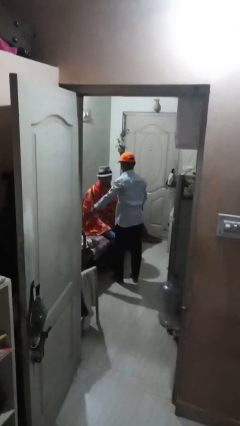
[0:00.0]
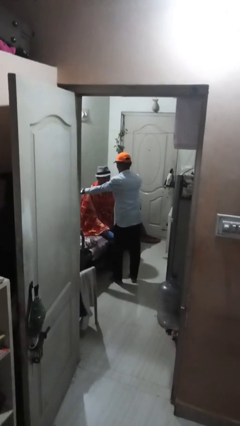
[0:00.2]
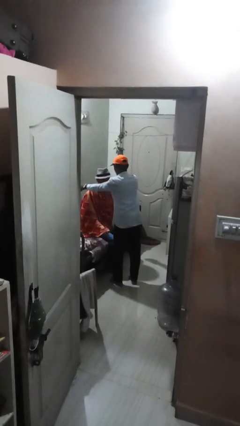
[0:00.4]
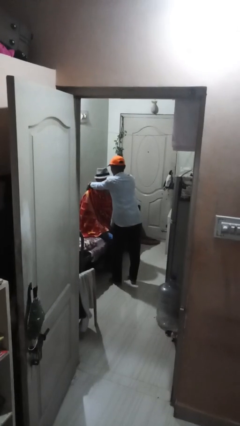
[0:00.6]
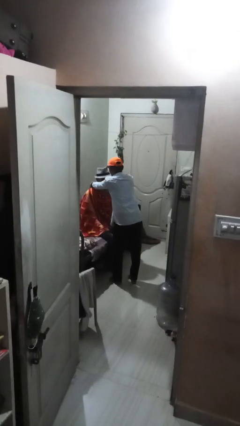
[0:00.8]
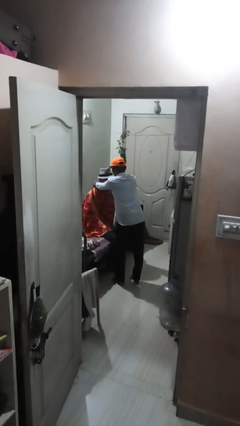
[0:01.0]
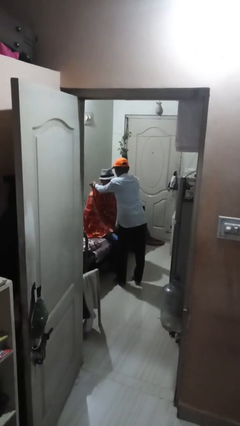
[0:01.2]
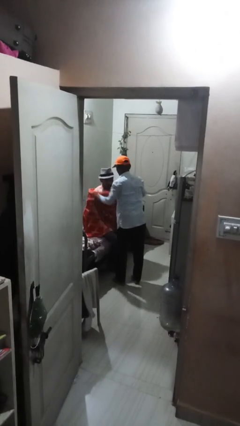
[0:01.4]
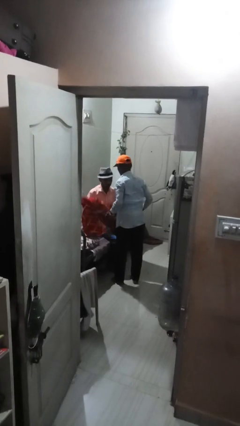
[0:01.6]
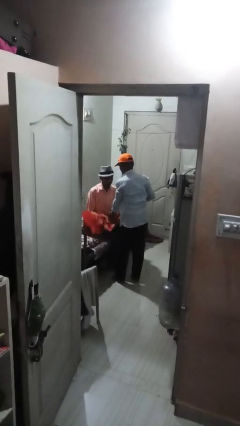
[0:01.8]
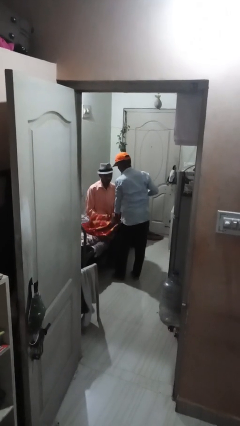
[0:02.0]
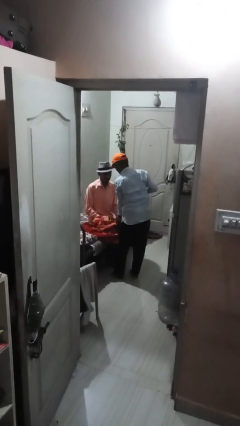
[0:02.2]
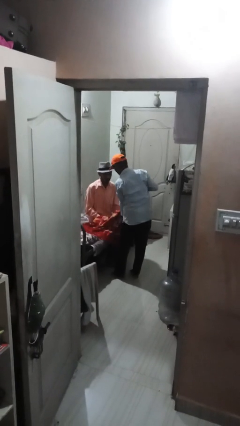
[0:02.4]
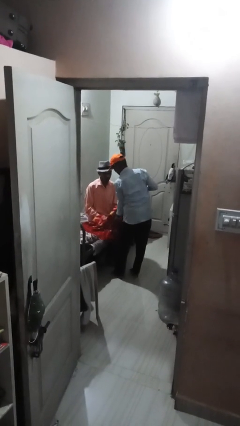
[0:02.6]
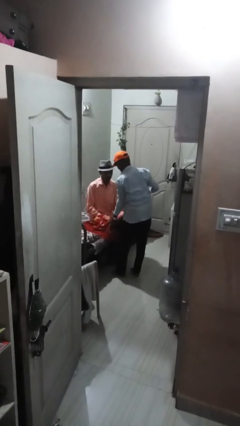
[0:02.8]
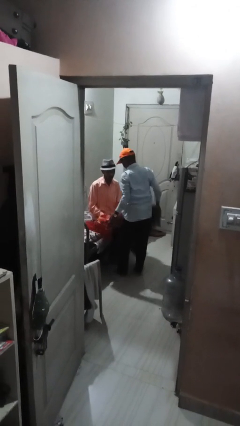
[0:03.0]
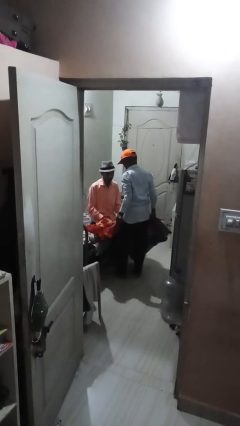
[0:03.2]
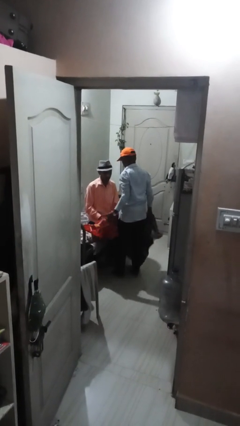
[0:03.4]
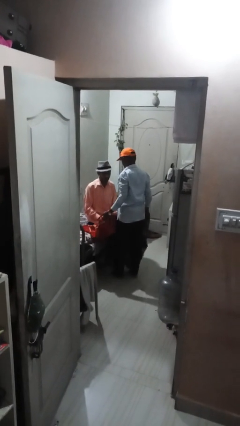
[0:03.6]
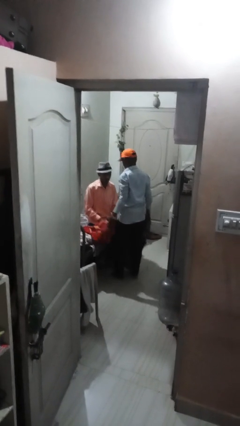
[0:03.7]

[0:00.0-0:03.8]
person uncovers friend with blanket

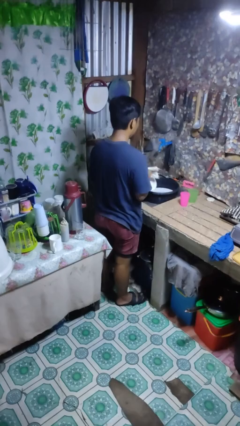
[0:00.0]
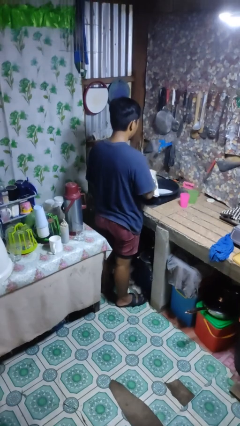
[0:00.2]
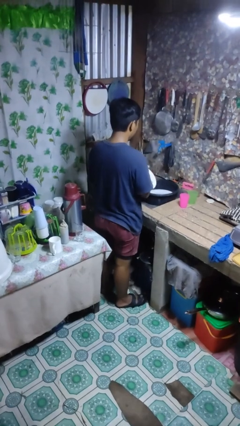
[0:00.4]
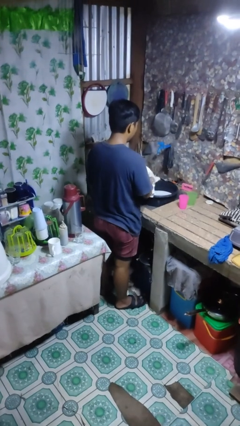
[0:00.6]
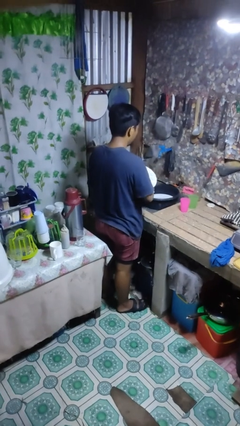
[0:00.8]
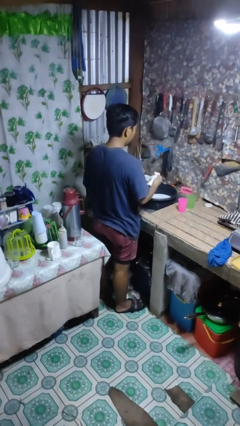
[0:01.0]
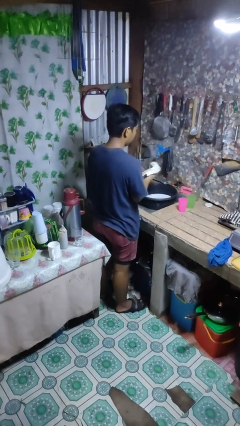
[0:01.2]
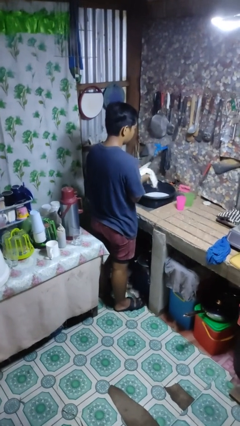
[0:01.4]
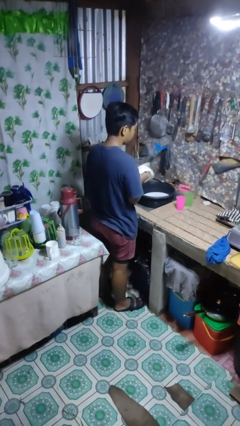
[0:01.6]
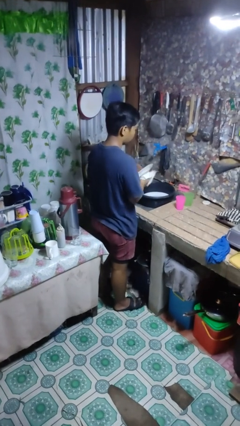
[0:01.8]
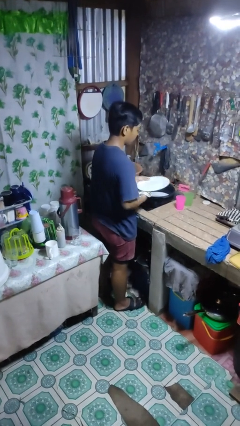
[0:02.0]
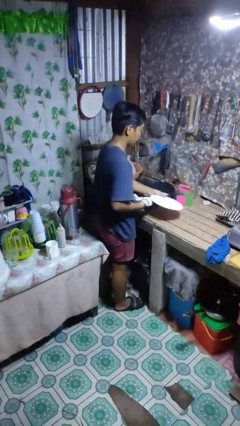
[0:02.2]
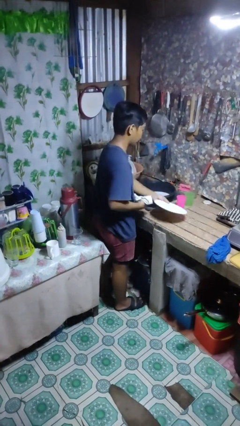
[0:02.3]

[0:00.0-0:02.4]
person dries dish

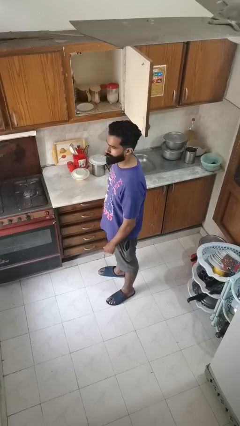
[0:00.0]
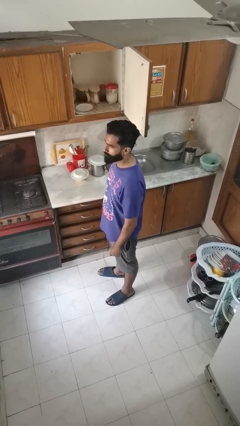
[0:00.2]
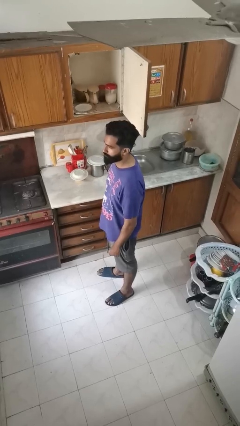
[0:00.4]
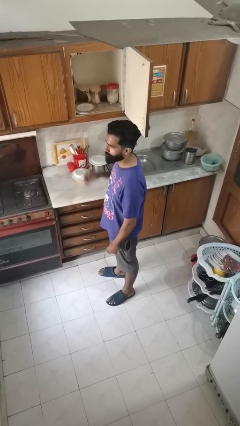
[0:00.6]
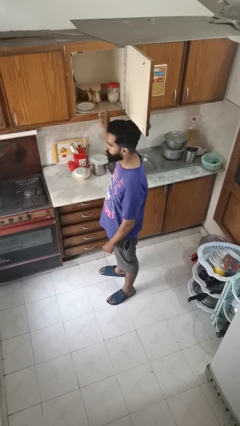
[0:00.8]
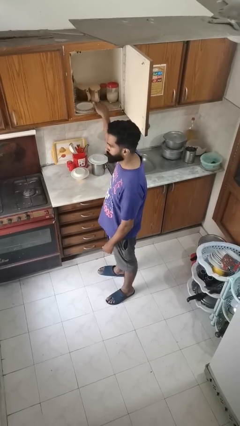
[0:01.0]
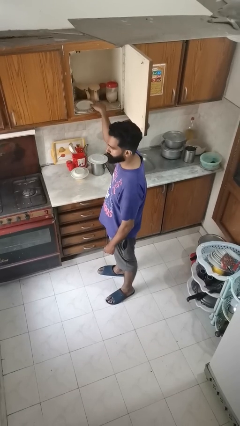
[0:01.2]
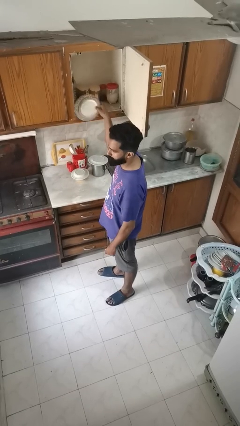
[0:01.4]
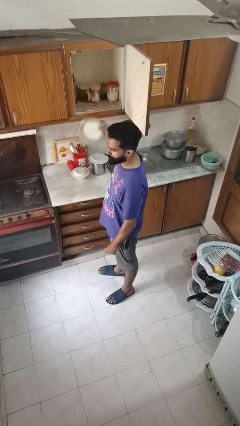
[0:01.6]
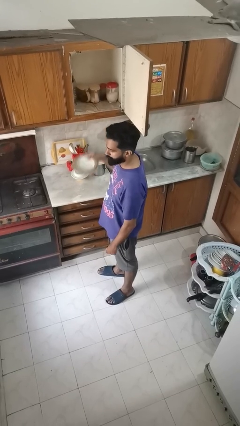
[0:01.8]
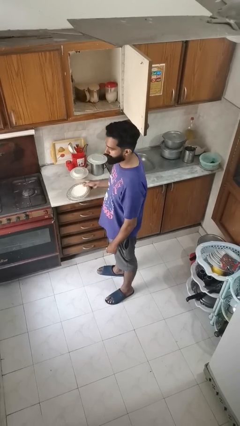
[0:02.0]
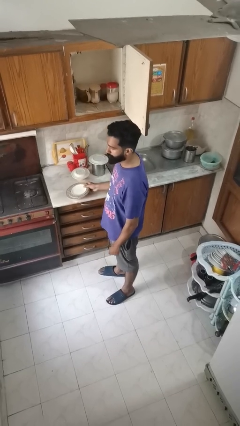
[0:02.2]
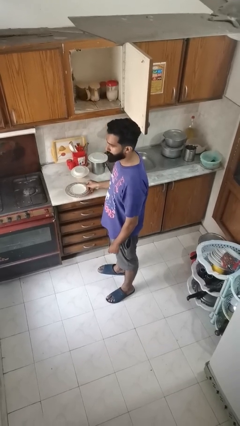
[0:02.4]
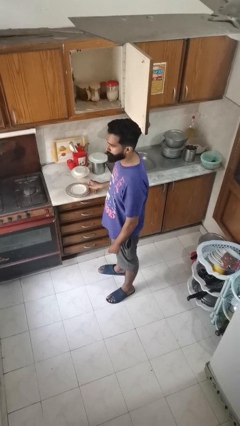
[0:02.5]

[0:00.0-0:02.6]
person takes object from cabinet

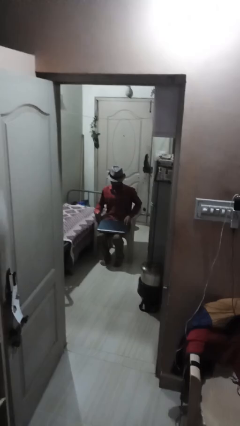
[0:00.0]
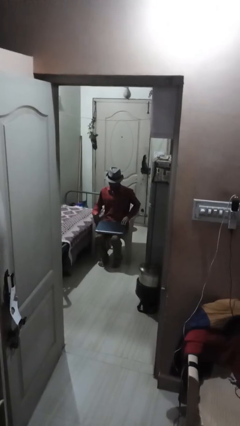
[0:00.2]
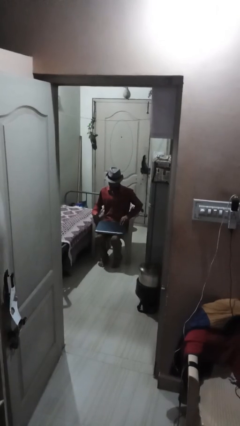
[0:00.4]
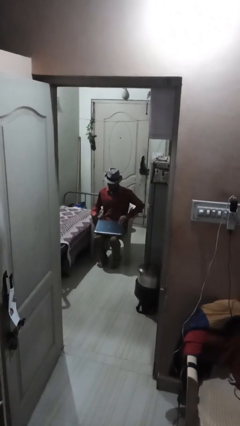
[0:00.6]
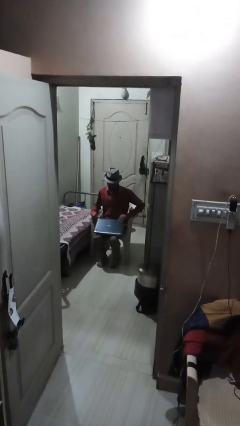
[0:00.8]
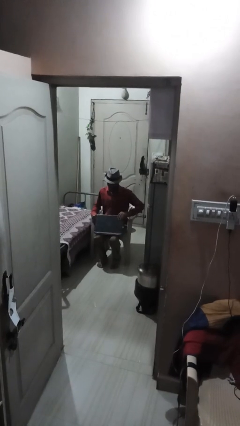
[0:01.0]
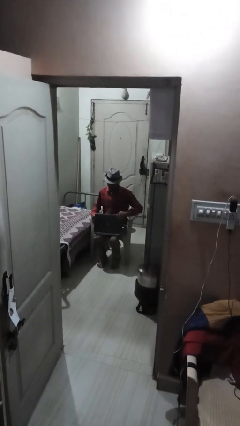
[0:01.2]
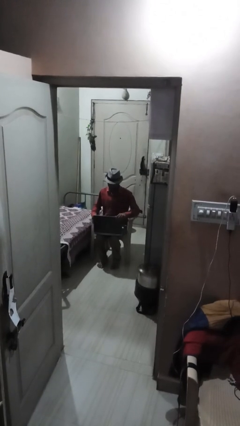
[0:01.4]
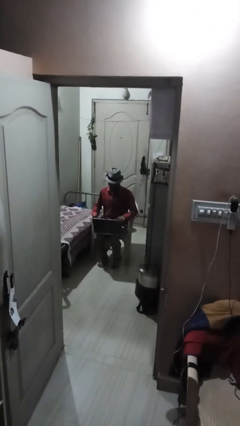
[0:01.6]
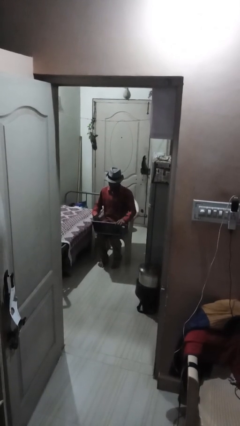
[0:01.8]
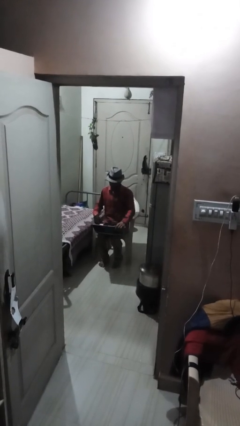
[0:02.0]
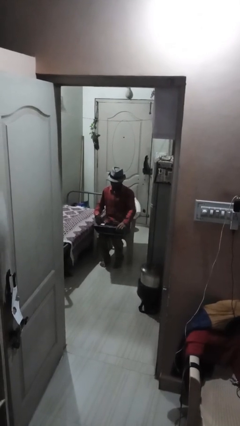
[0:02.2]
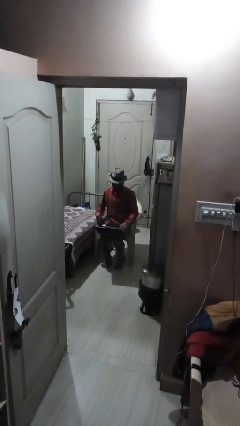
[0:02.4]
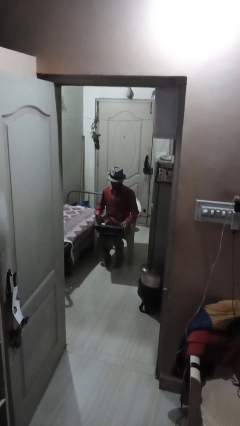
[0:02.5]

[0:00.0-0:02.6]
person opens laptop

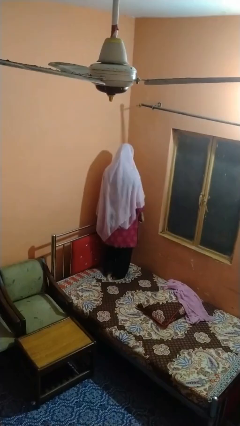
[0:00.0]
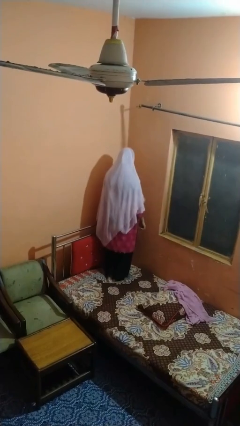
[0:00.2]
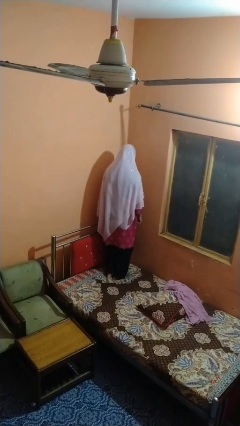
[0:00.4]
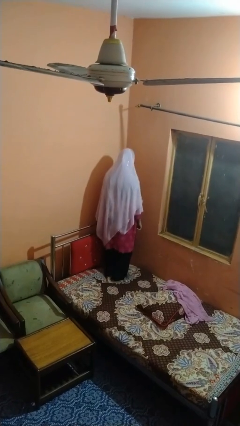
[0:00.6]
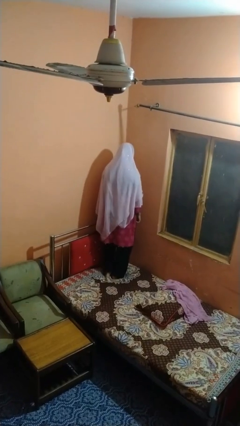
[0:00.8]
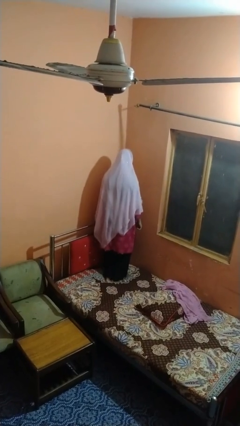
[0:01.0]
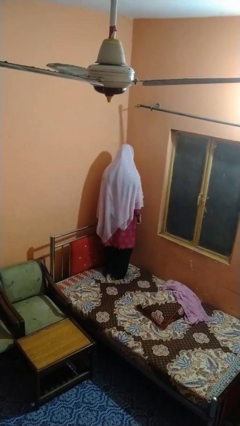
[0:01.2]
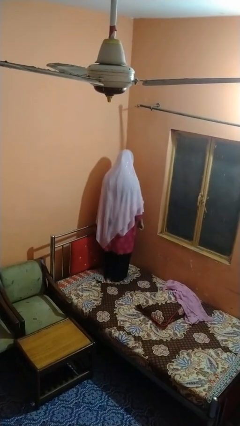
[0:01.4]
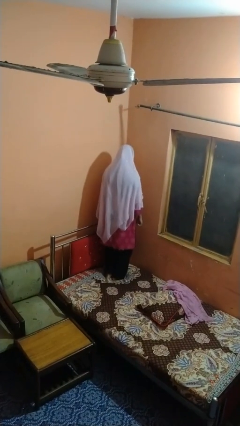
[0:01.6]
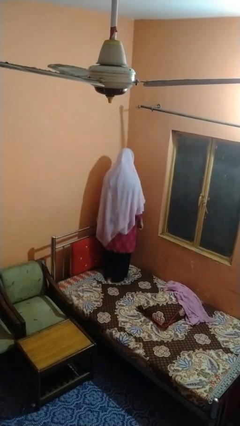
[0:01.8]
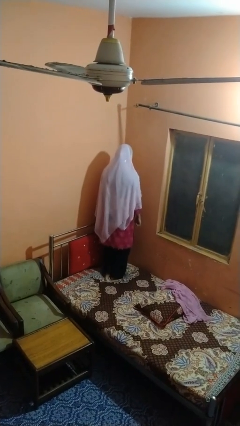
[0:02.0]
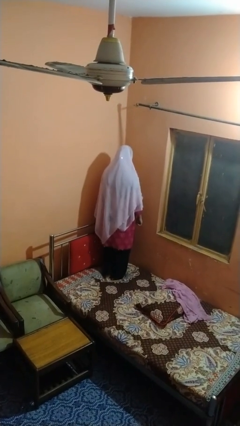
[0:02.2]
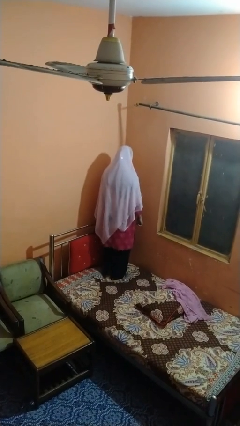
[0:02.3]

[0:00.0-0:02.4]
person jumps on bed

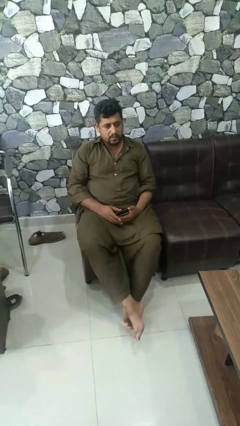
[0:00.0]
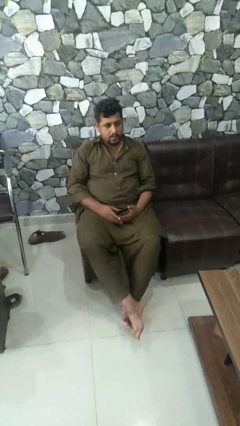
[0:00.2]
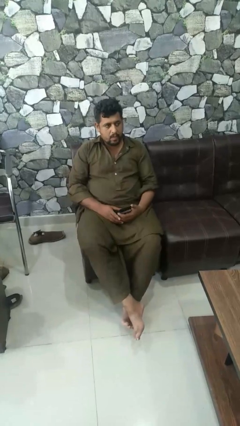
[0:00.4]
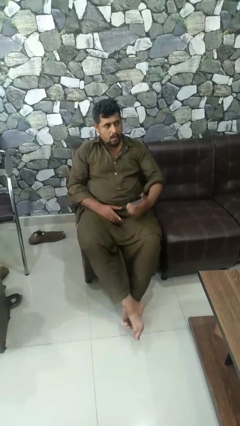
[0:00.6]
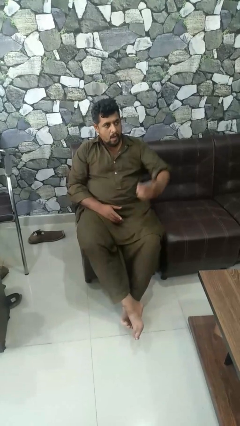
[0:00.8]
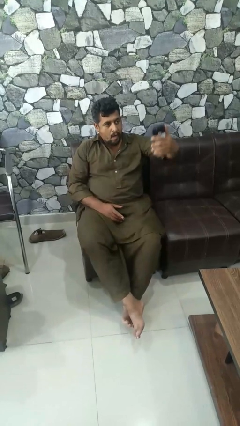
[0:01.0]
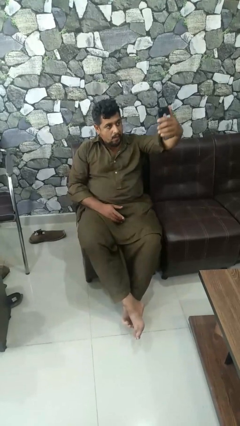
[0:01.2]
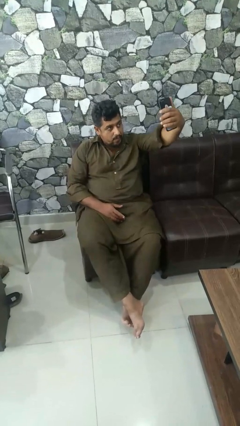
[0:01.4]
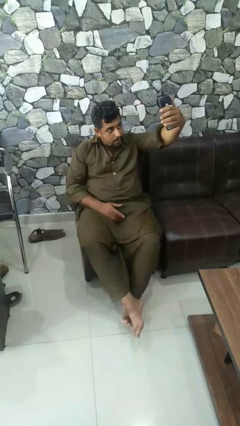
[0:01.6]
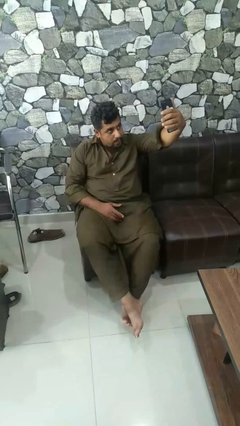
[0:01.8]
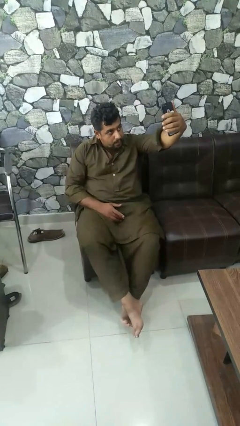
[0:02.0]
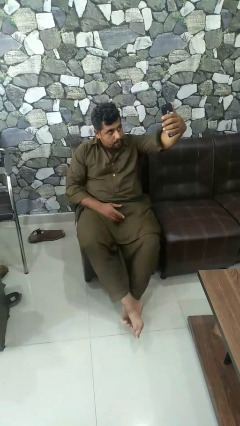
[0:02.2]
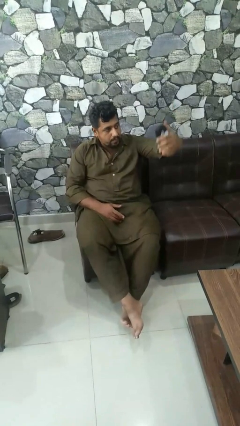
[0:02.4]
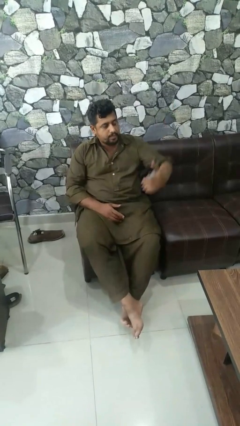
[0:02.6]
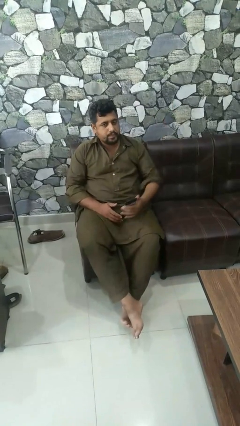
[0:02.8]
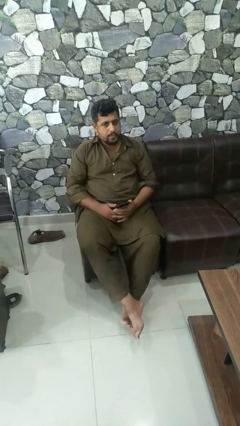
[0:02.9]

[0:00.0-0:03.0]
person takes selfie

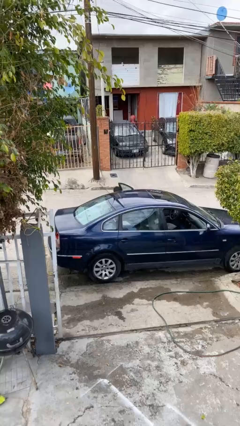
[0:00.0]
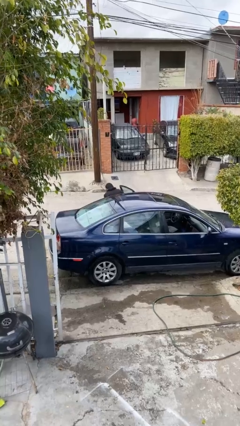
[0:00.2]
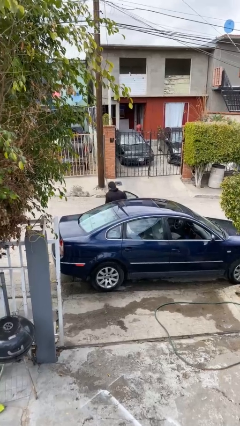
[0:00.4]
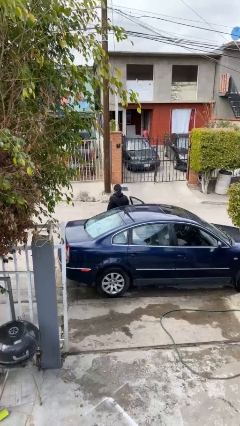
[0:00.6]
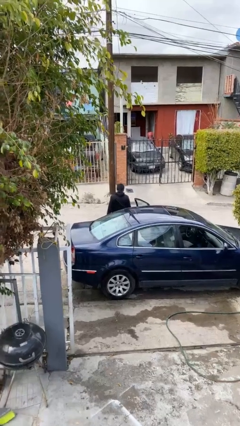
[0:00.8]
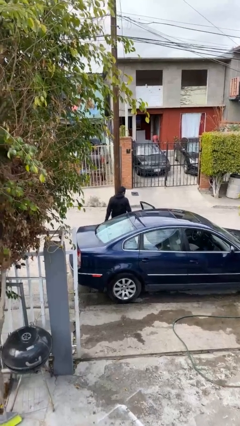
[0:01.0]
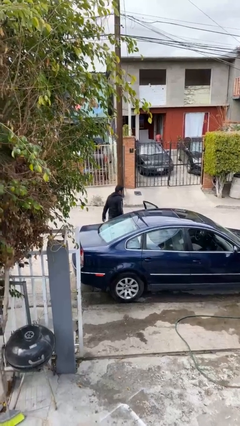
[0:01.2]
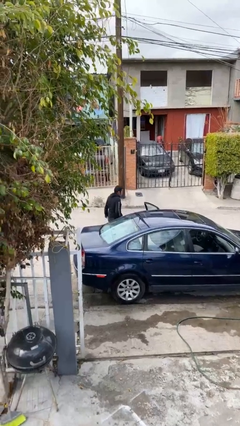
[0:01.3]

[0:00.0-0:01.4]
person exits car
